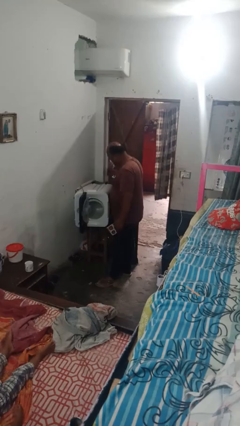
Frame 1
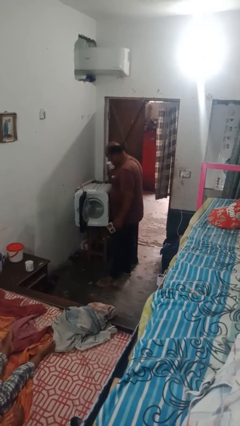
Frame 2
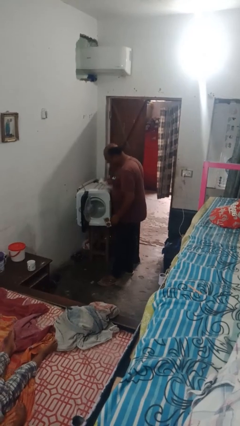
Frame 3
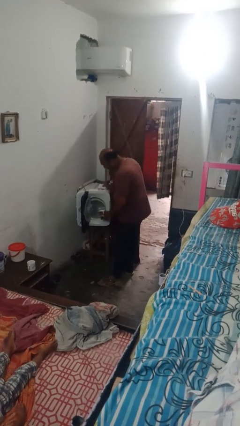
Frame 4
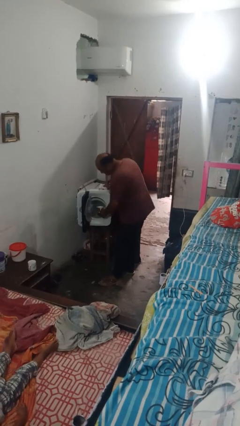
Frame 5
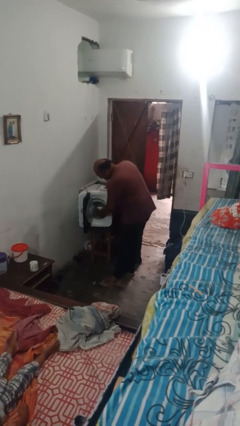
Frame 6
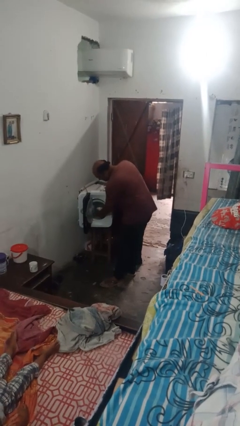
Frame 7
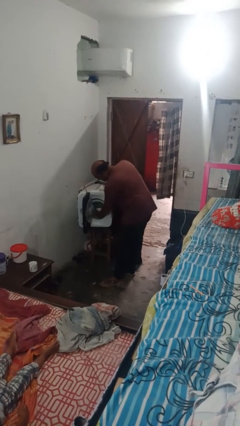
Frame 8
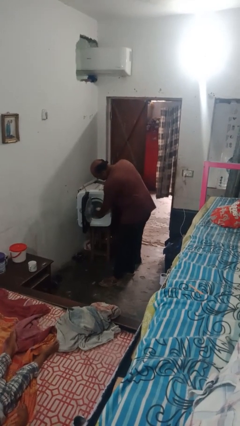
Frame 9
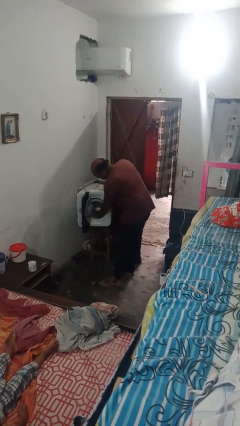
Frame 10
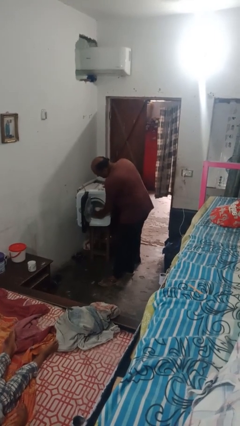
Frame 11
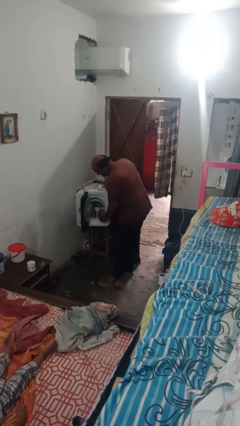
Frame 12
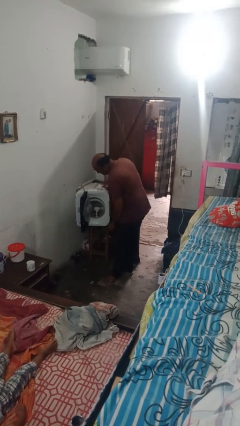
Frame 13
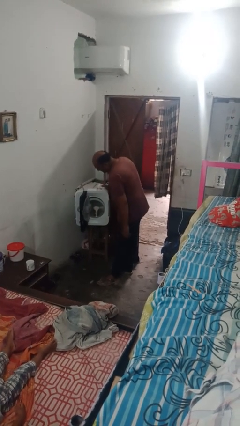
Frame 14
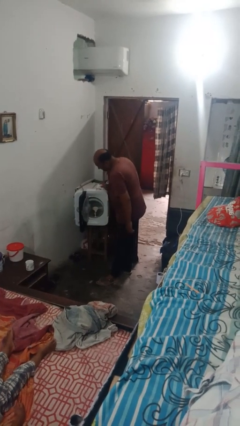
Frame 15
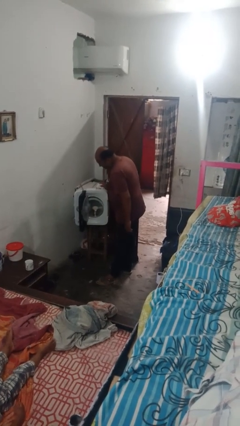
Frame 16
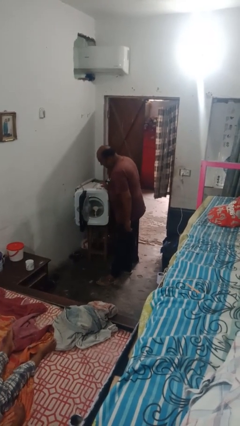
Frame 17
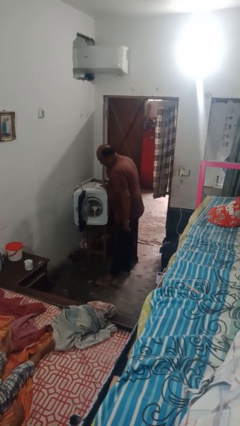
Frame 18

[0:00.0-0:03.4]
person loads dishwasher

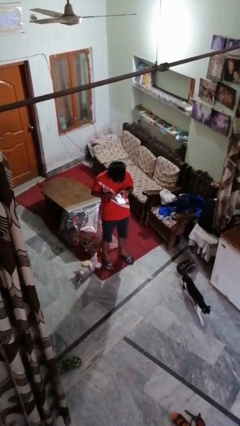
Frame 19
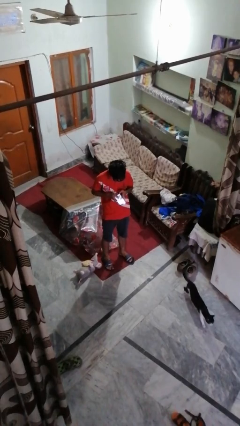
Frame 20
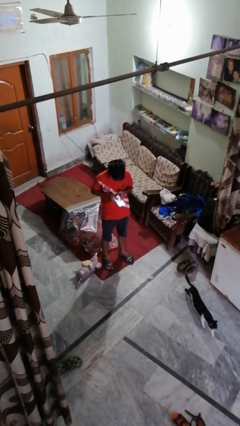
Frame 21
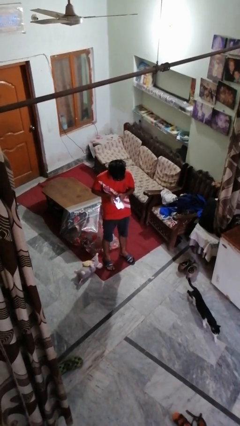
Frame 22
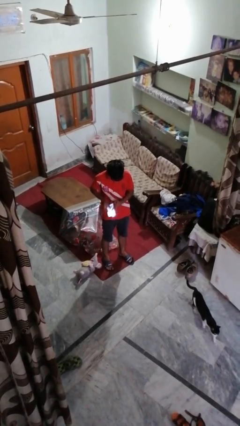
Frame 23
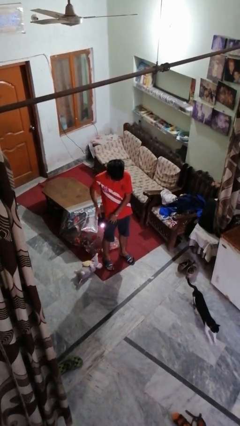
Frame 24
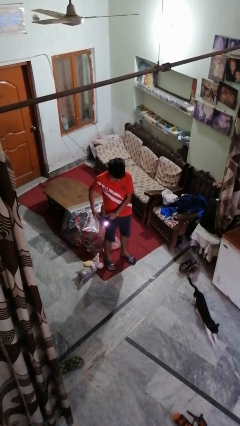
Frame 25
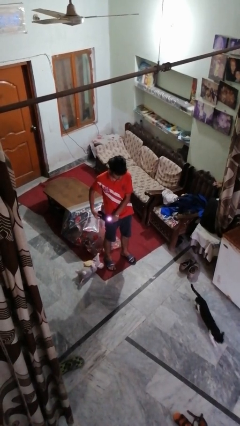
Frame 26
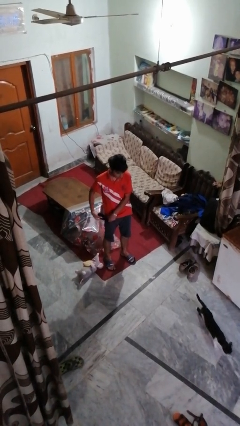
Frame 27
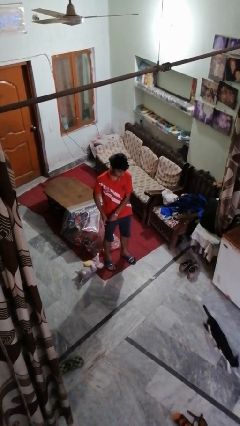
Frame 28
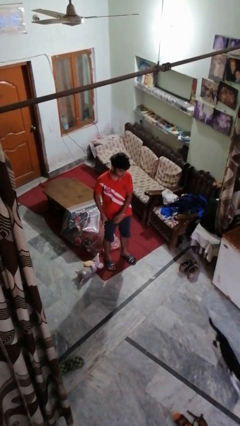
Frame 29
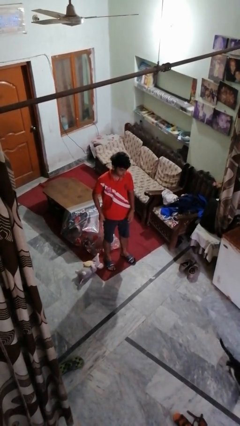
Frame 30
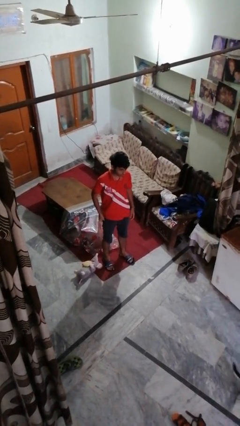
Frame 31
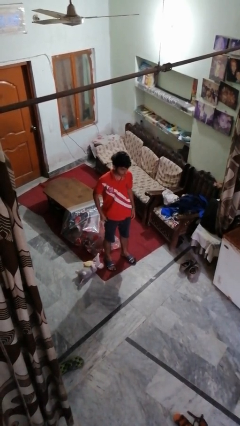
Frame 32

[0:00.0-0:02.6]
person puts phone into pocket

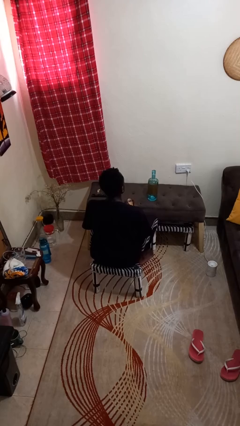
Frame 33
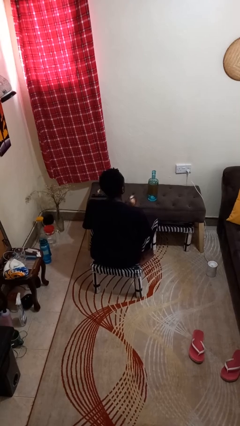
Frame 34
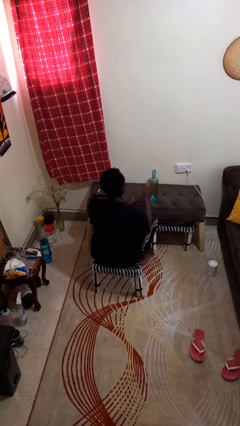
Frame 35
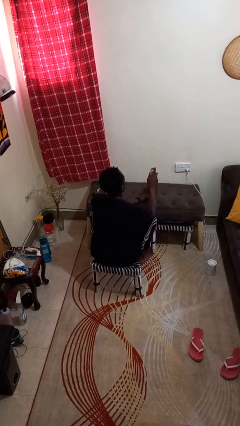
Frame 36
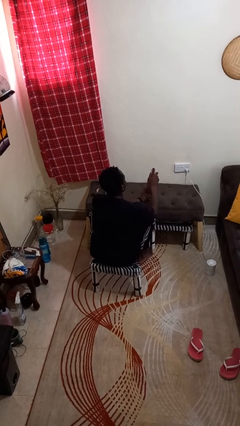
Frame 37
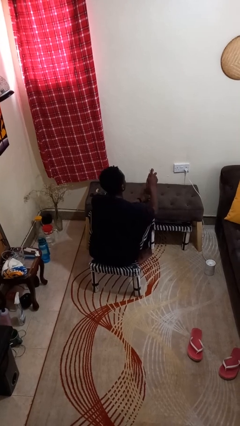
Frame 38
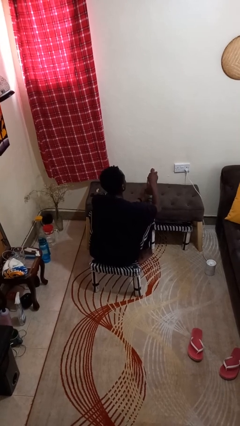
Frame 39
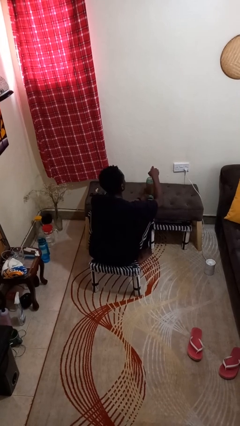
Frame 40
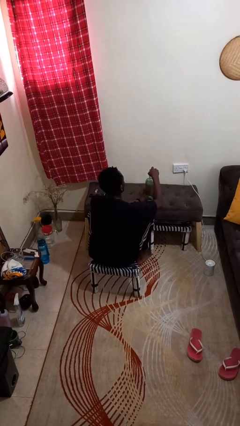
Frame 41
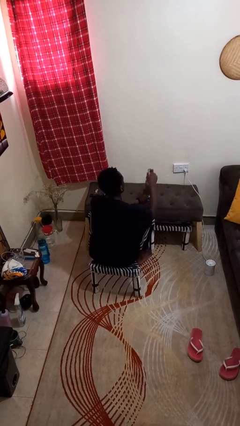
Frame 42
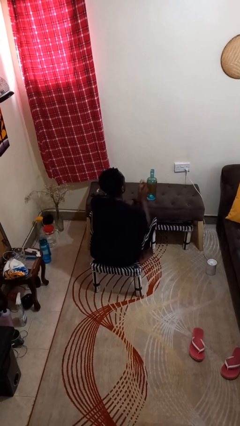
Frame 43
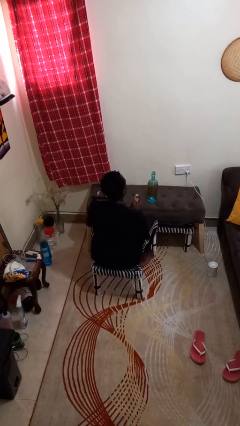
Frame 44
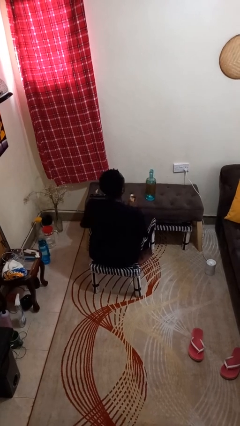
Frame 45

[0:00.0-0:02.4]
person opens can with can opener

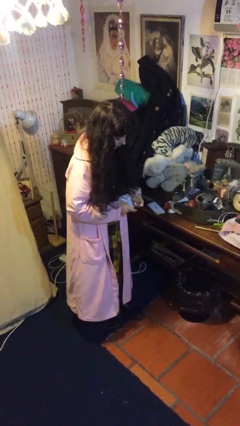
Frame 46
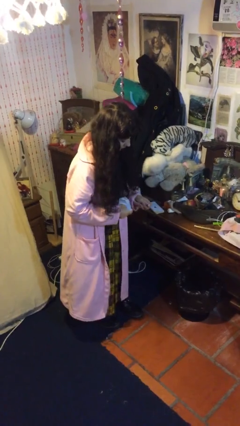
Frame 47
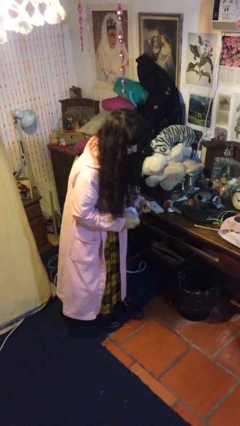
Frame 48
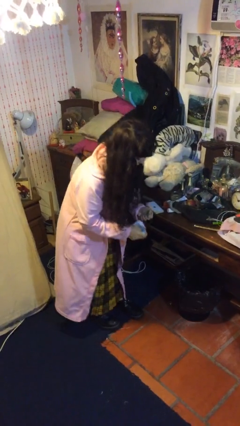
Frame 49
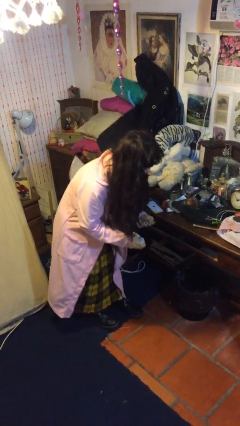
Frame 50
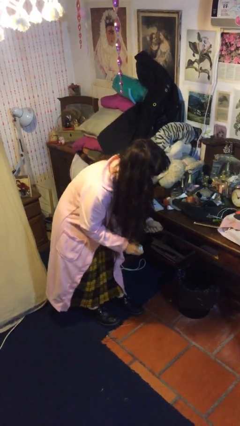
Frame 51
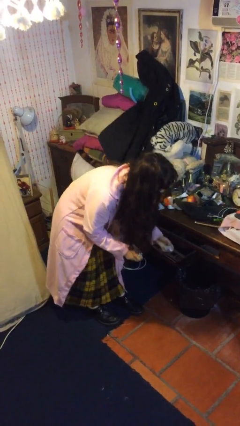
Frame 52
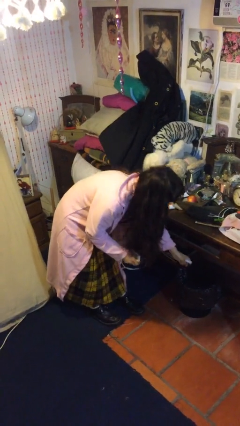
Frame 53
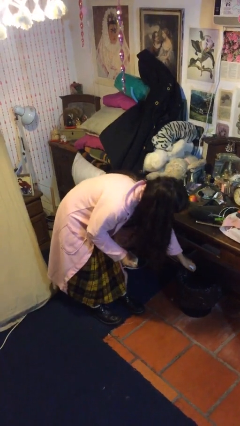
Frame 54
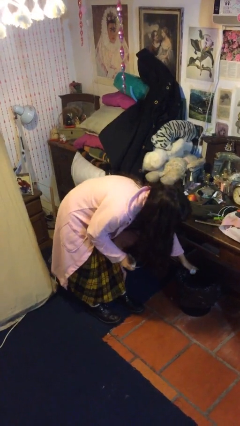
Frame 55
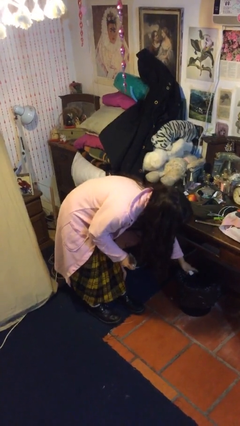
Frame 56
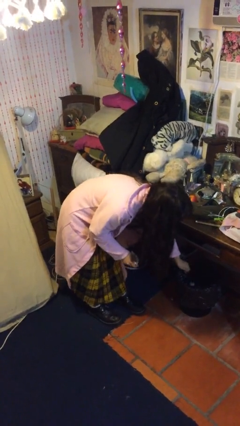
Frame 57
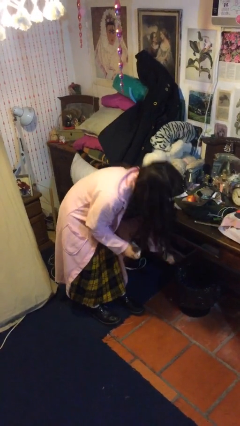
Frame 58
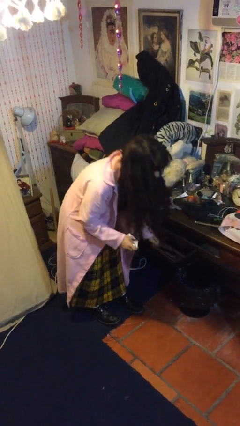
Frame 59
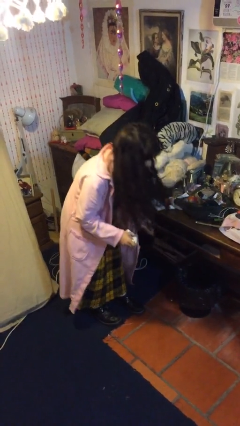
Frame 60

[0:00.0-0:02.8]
person discards trash

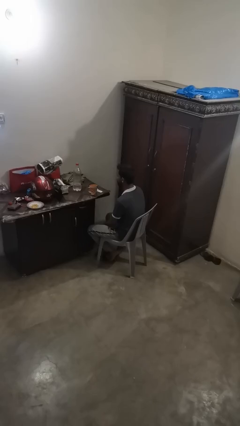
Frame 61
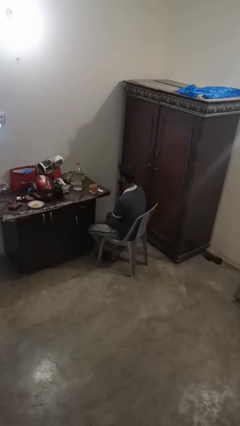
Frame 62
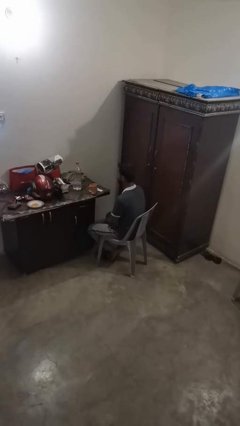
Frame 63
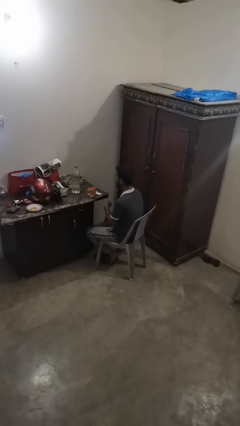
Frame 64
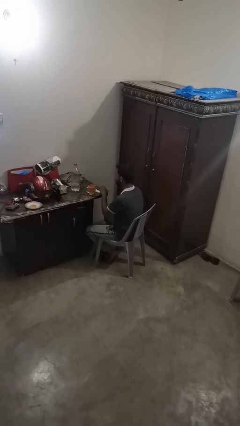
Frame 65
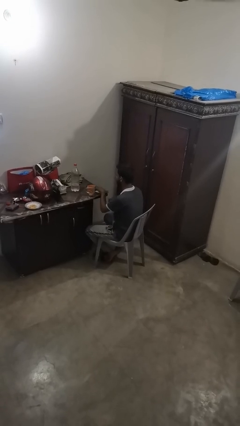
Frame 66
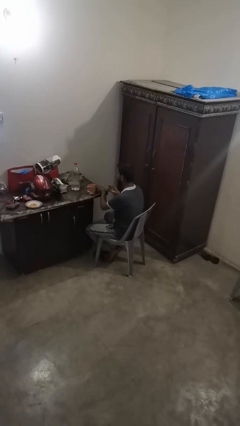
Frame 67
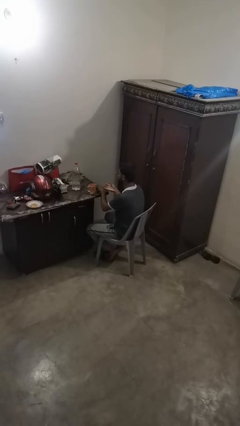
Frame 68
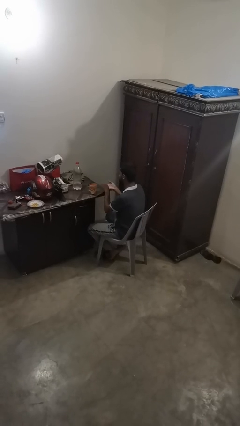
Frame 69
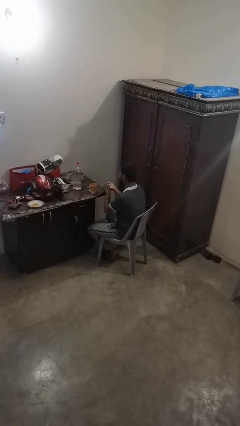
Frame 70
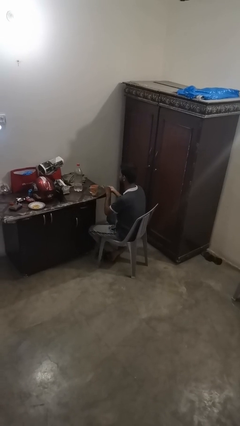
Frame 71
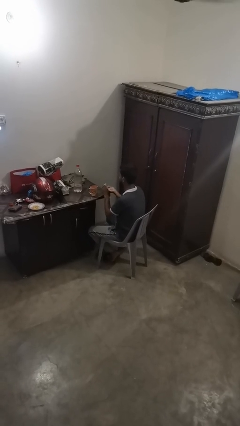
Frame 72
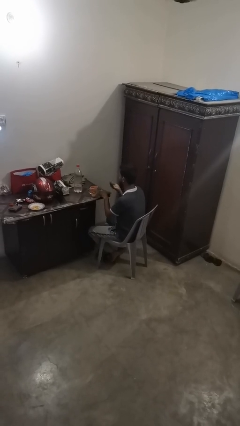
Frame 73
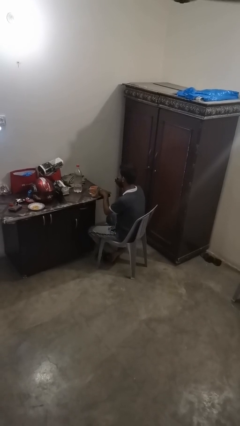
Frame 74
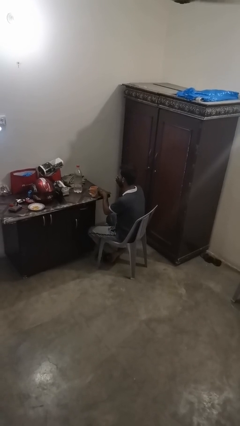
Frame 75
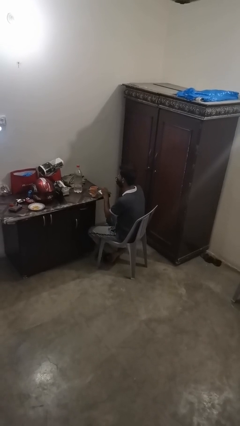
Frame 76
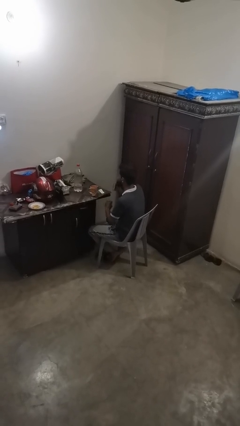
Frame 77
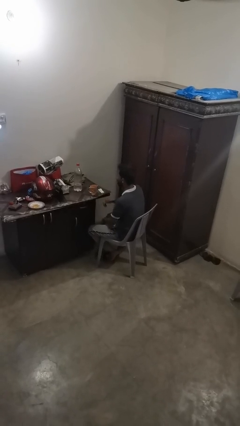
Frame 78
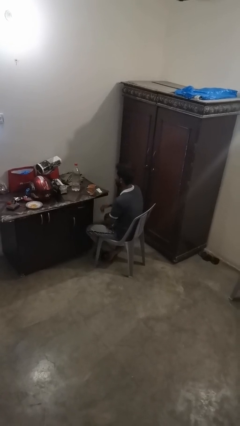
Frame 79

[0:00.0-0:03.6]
person takes medicine pills

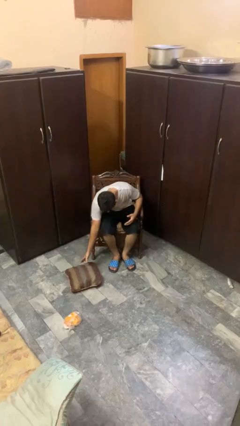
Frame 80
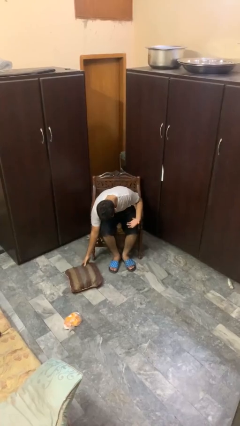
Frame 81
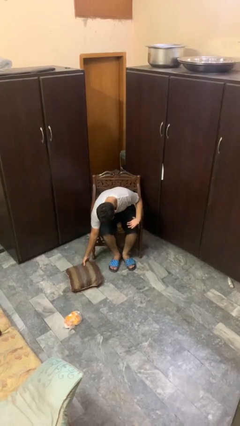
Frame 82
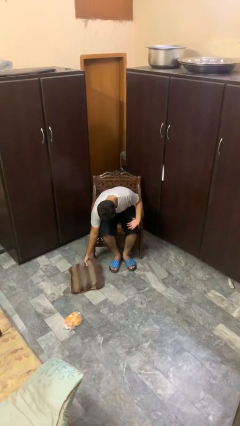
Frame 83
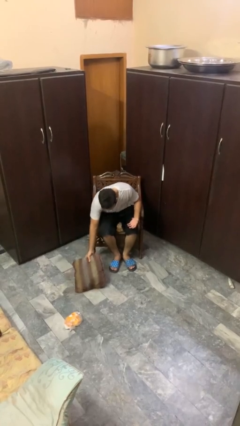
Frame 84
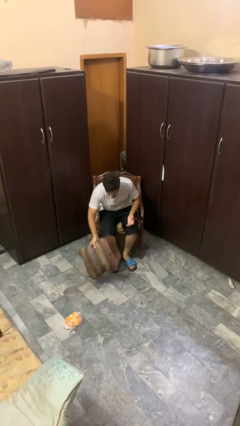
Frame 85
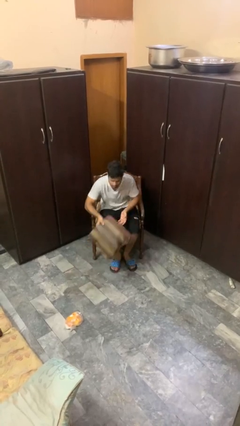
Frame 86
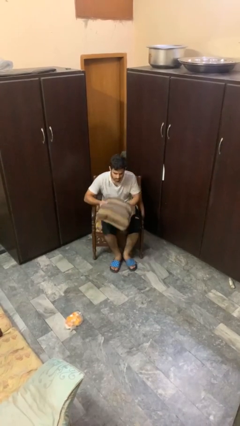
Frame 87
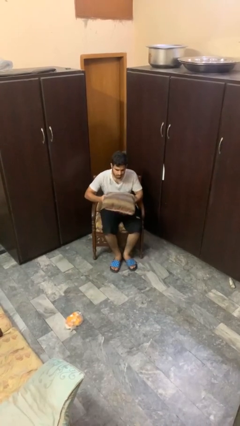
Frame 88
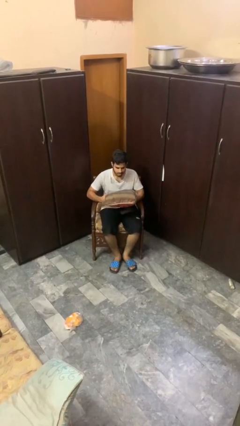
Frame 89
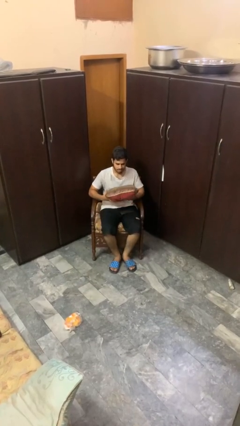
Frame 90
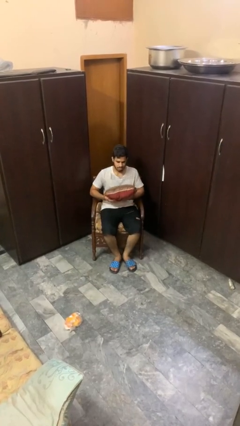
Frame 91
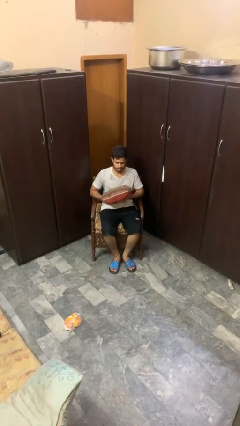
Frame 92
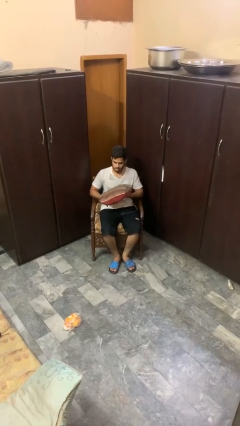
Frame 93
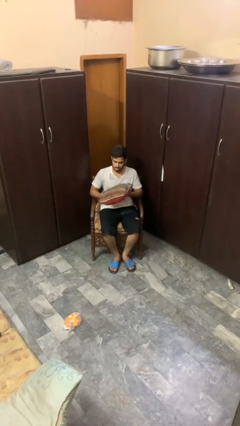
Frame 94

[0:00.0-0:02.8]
person picks up object from floor

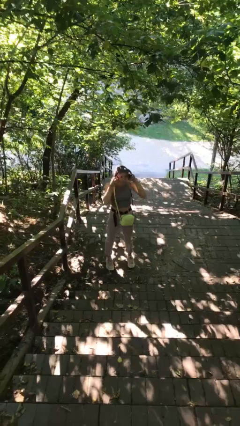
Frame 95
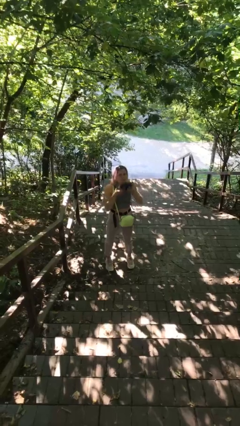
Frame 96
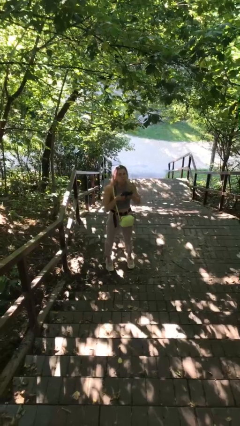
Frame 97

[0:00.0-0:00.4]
person takes off headphones
